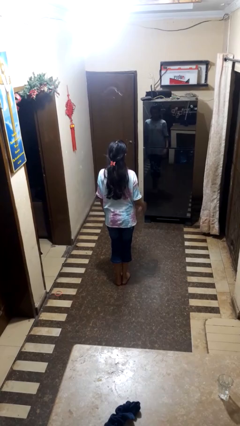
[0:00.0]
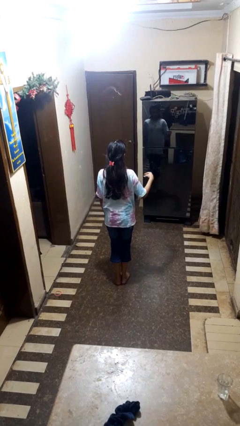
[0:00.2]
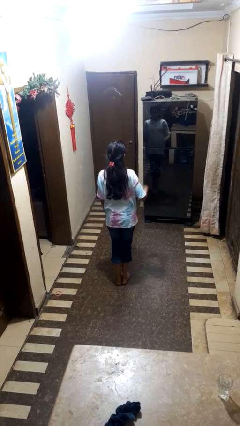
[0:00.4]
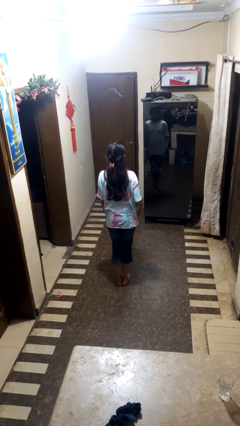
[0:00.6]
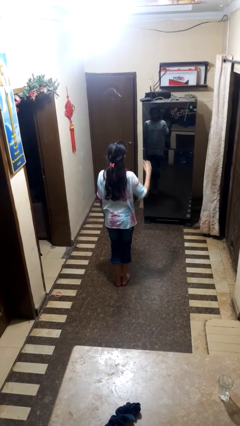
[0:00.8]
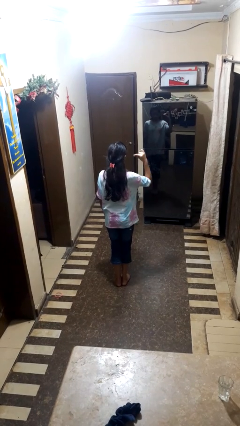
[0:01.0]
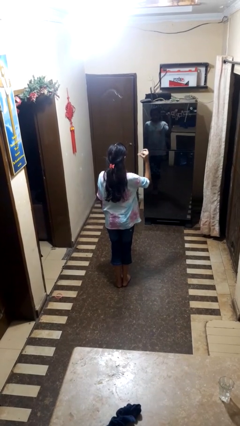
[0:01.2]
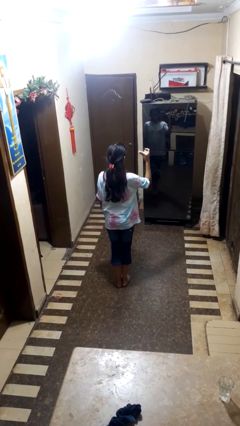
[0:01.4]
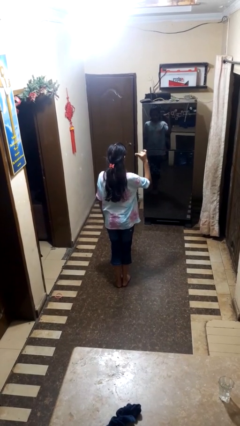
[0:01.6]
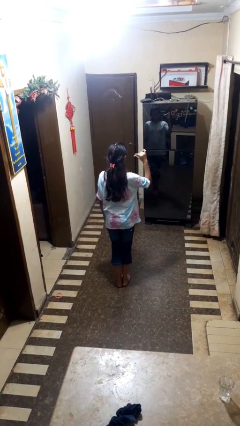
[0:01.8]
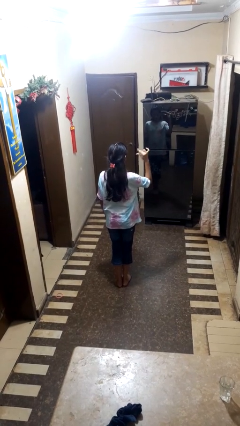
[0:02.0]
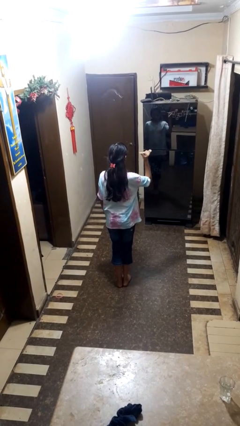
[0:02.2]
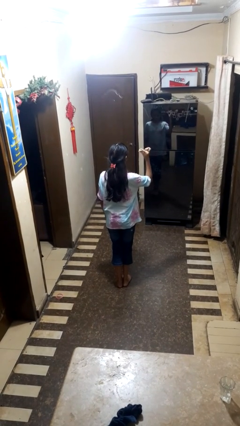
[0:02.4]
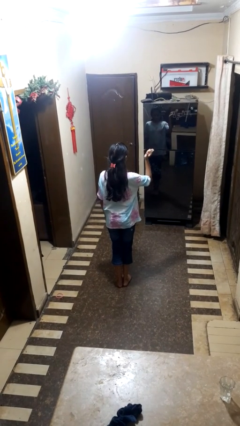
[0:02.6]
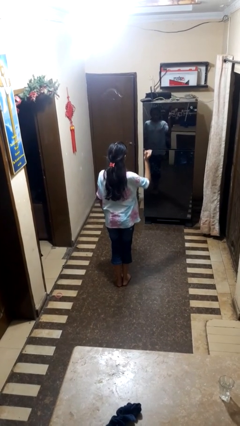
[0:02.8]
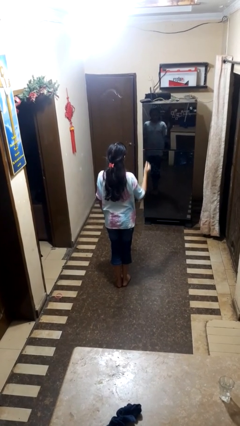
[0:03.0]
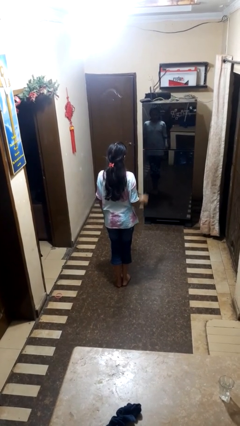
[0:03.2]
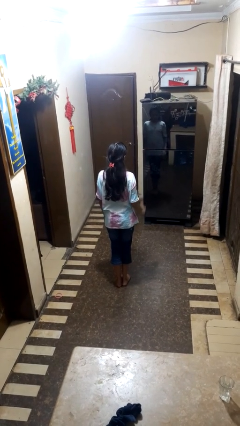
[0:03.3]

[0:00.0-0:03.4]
person snaps fingers

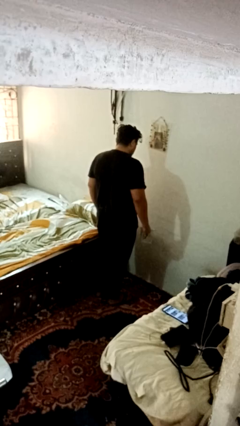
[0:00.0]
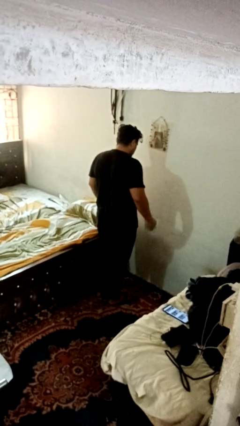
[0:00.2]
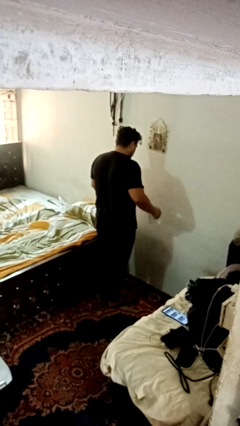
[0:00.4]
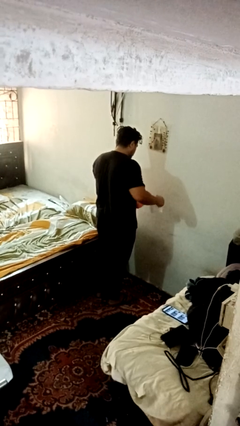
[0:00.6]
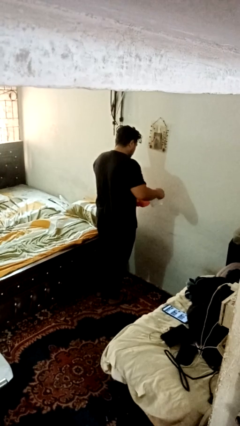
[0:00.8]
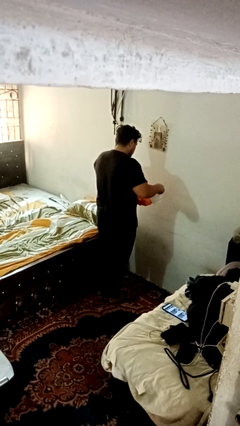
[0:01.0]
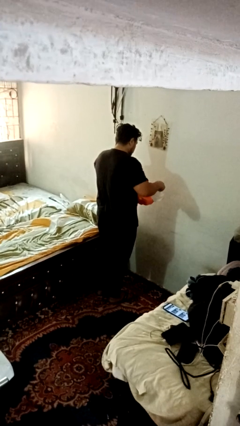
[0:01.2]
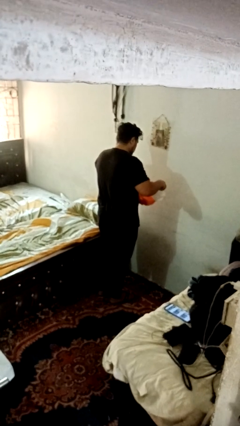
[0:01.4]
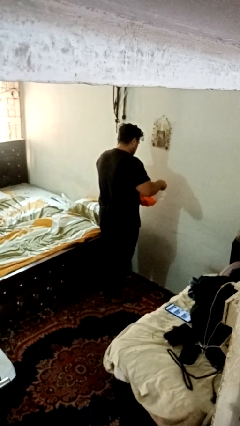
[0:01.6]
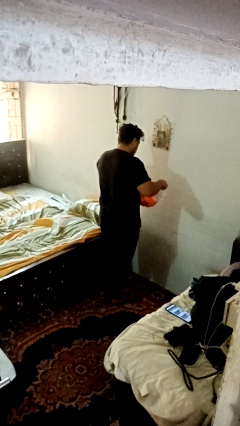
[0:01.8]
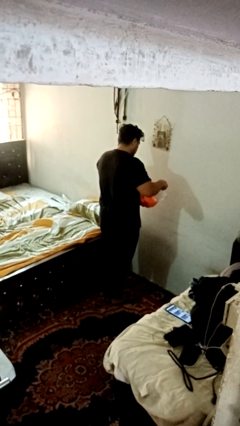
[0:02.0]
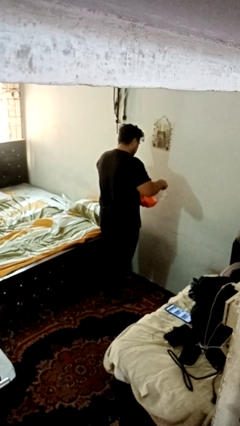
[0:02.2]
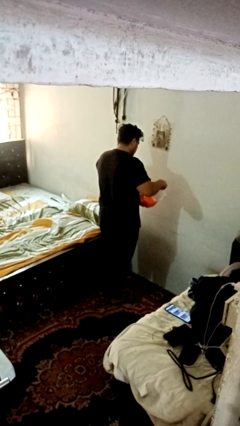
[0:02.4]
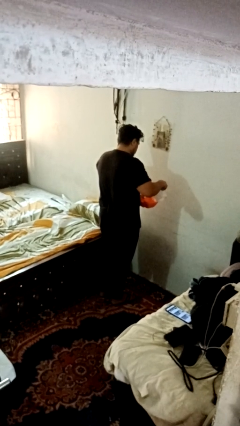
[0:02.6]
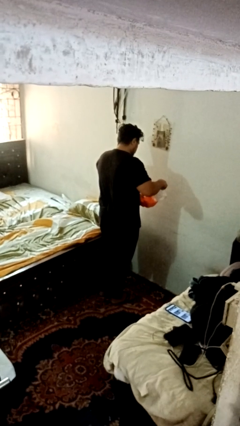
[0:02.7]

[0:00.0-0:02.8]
person pours into bowl

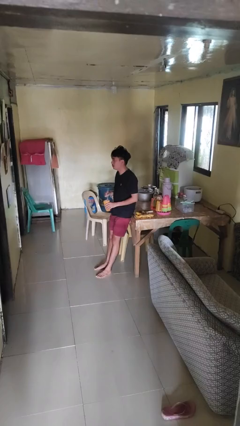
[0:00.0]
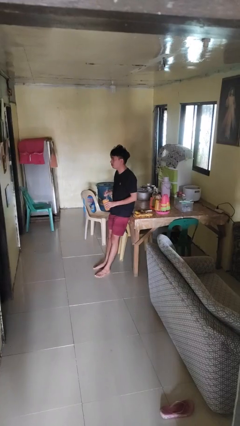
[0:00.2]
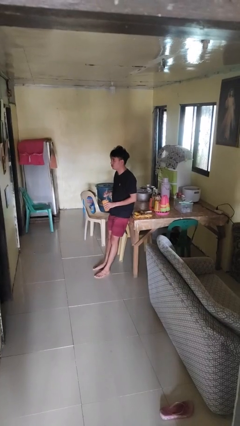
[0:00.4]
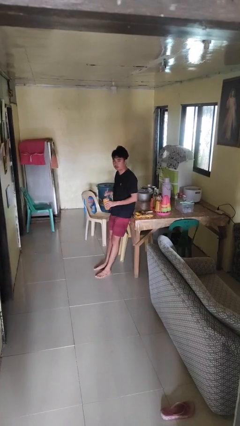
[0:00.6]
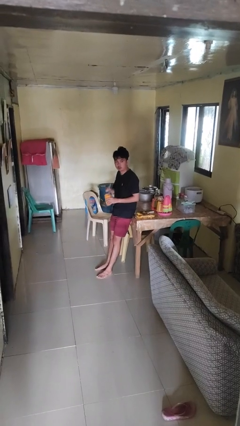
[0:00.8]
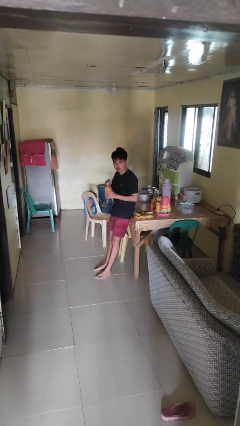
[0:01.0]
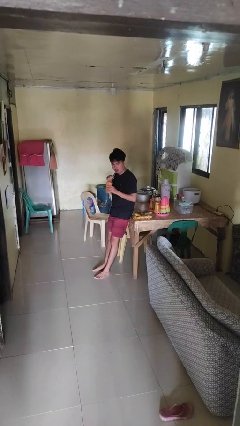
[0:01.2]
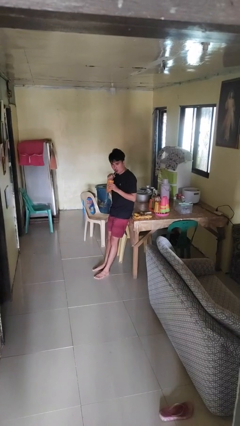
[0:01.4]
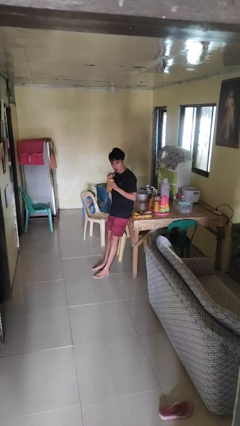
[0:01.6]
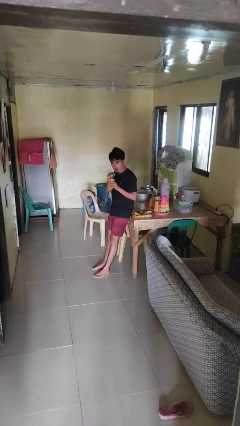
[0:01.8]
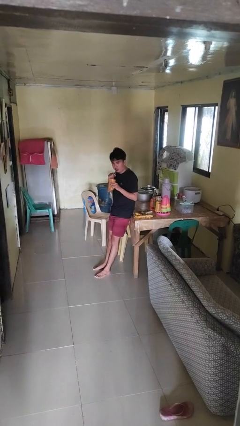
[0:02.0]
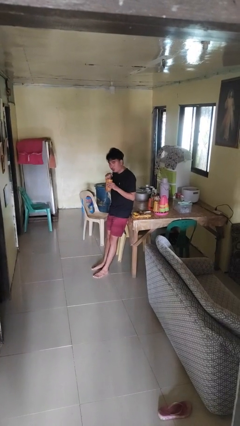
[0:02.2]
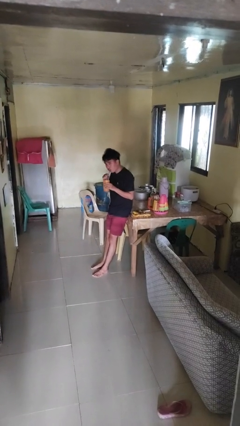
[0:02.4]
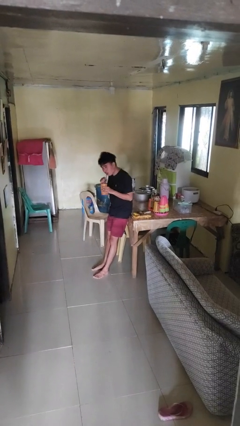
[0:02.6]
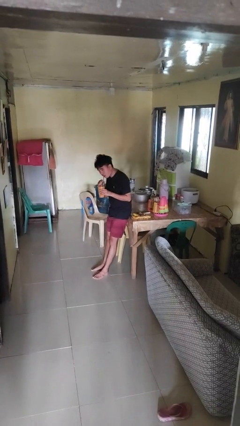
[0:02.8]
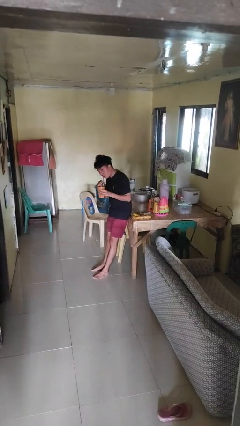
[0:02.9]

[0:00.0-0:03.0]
person drinks from straw

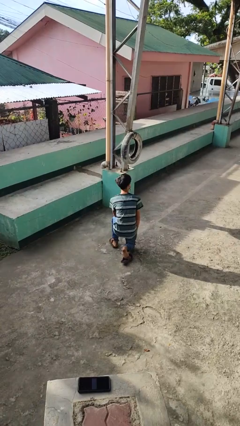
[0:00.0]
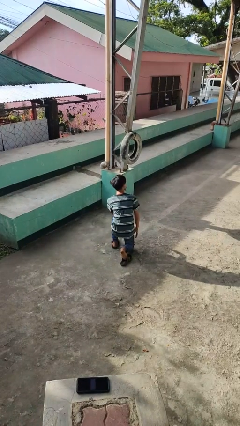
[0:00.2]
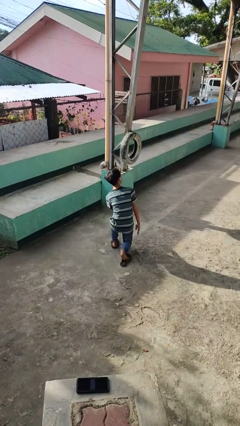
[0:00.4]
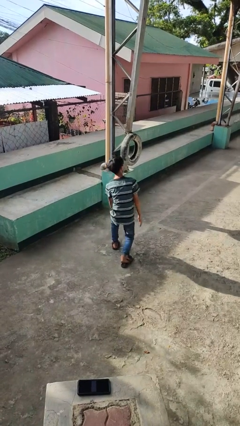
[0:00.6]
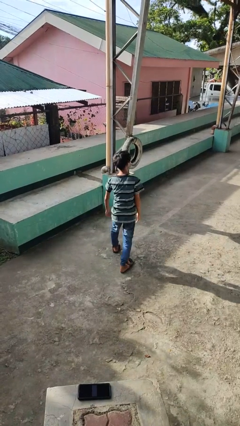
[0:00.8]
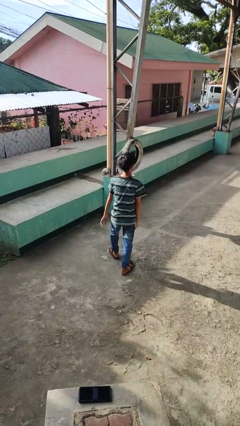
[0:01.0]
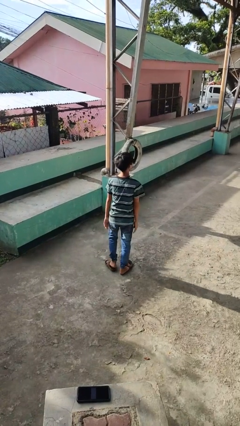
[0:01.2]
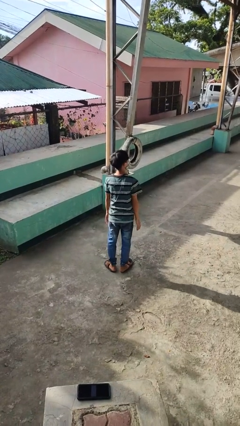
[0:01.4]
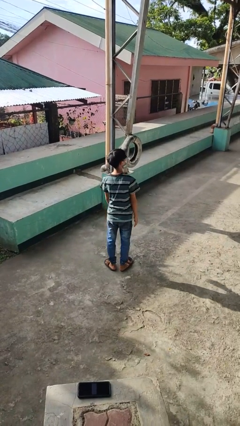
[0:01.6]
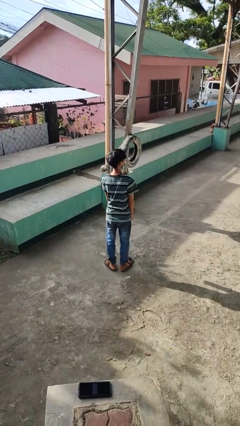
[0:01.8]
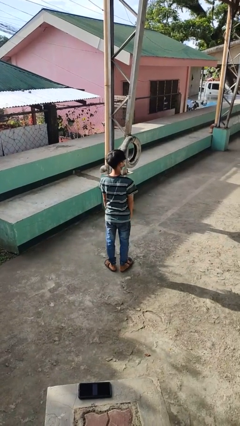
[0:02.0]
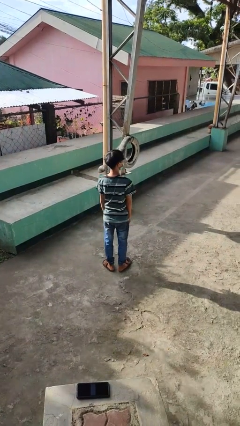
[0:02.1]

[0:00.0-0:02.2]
person stands up from floor

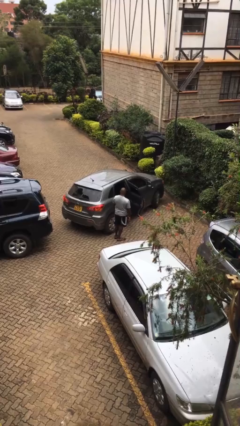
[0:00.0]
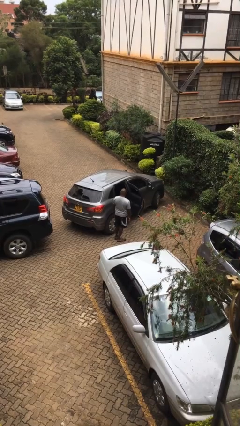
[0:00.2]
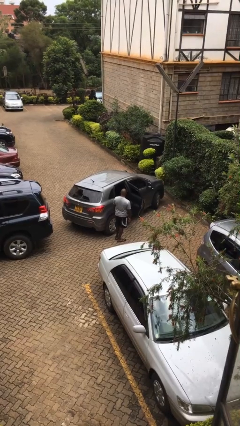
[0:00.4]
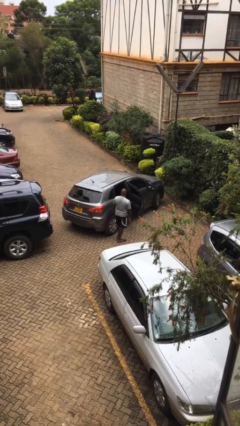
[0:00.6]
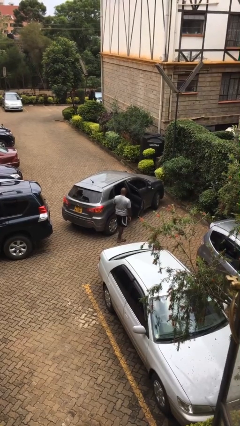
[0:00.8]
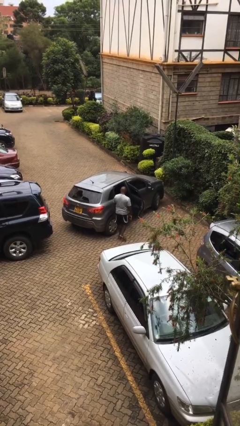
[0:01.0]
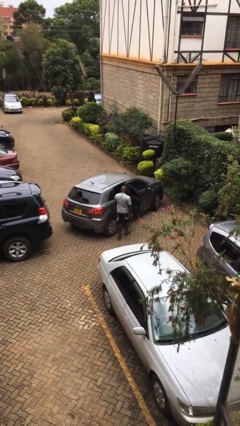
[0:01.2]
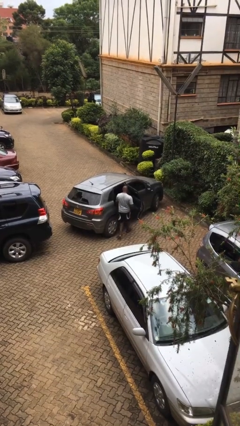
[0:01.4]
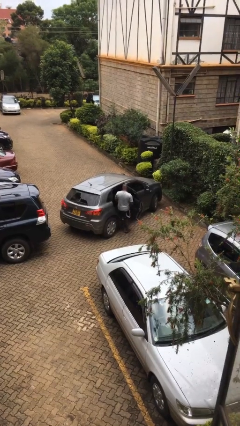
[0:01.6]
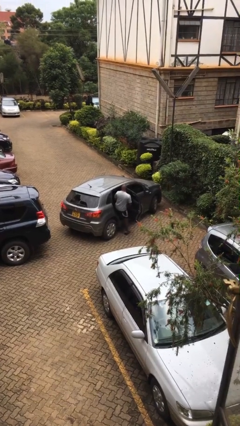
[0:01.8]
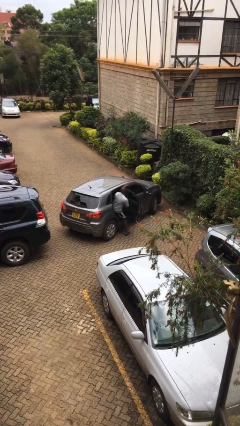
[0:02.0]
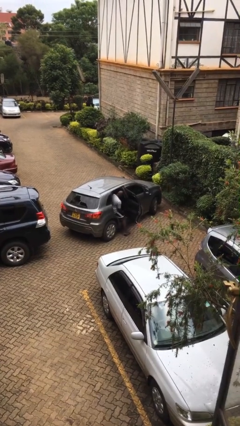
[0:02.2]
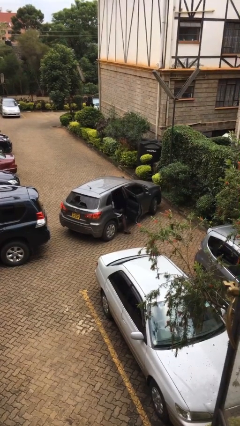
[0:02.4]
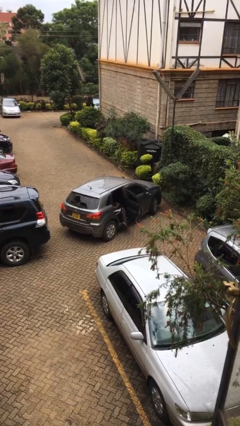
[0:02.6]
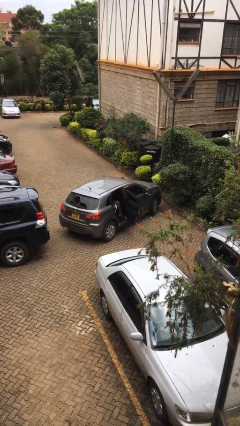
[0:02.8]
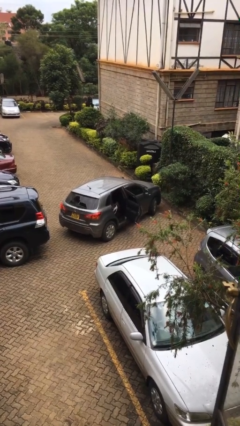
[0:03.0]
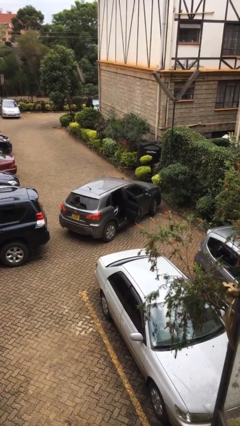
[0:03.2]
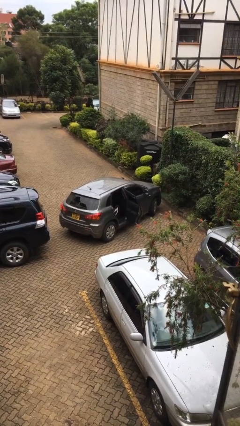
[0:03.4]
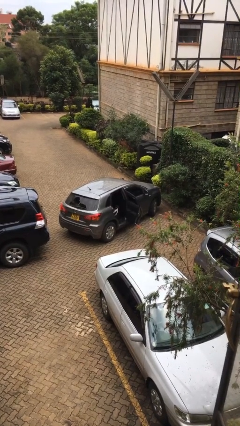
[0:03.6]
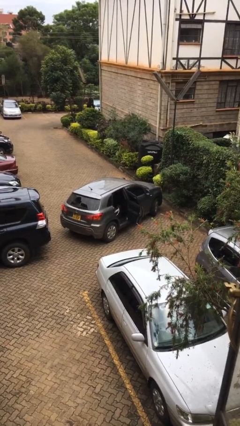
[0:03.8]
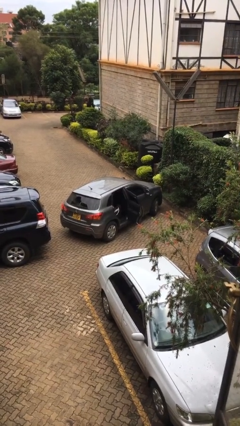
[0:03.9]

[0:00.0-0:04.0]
person enters car

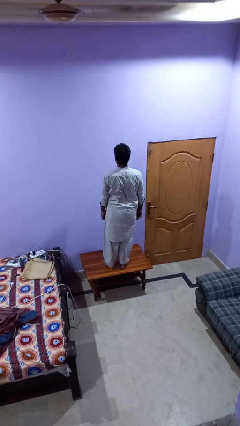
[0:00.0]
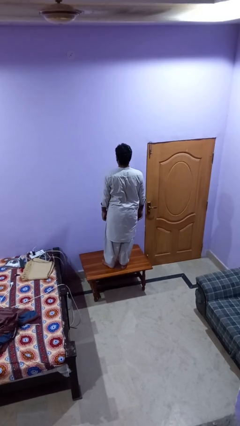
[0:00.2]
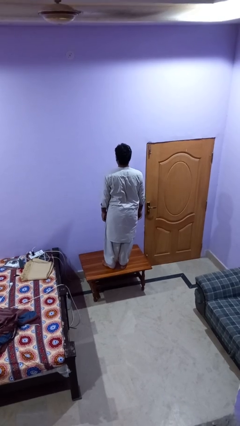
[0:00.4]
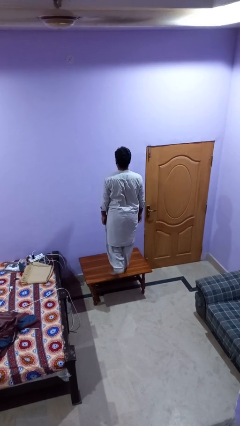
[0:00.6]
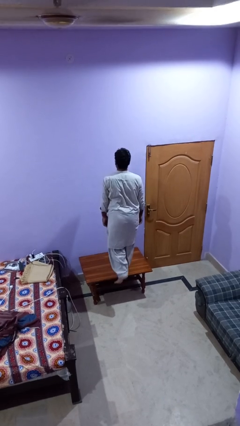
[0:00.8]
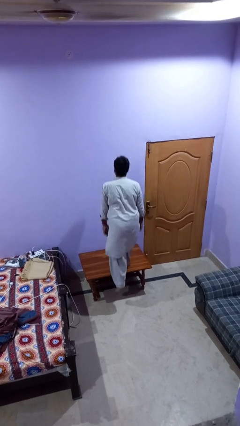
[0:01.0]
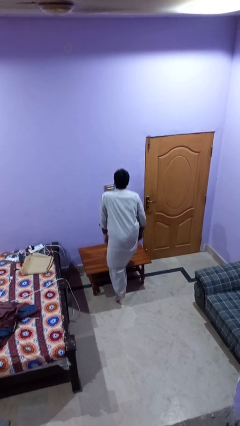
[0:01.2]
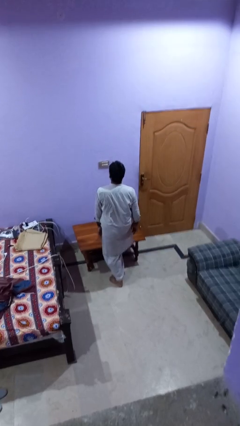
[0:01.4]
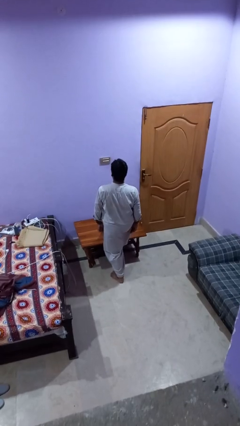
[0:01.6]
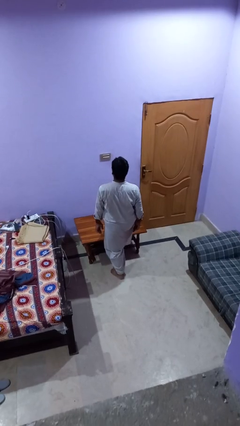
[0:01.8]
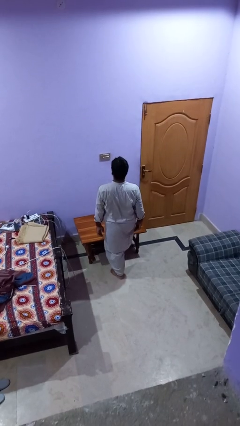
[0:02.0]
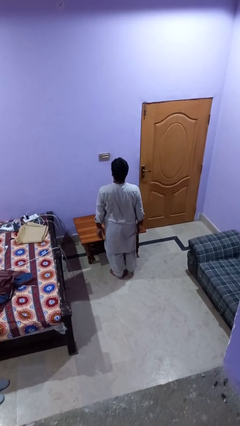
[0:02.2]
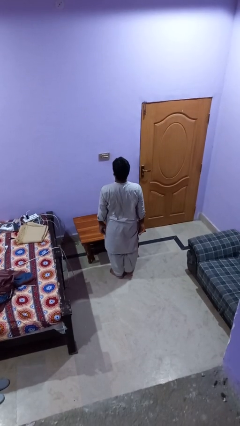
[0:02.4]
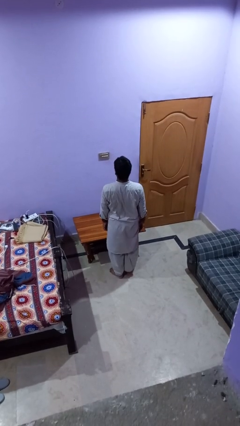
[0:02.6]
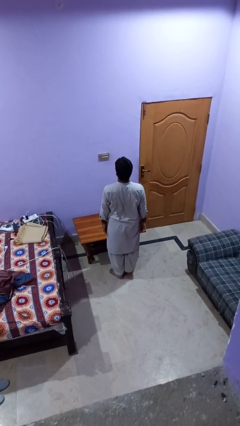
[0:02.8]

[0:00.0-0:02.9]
person climbs off table
